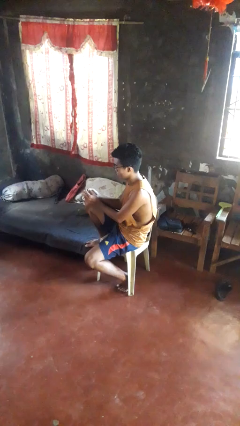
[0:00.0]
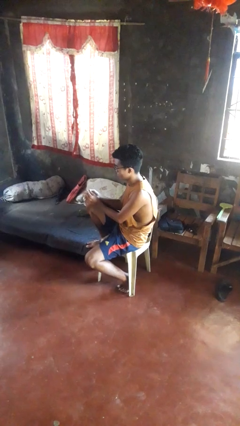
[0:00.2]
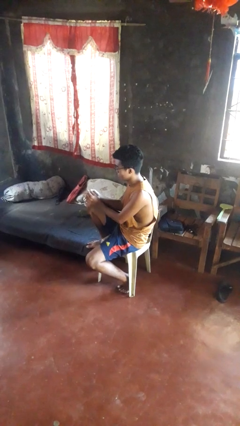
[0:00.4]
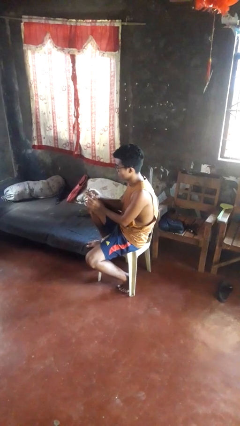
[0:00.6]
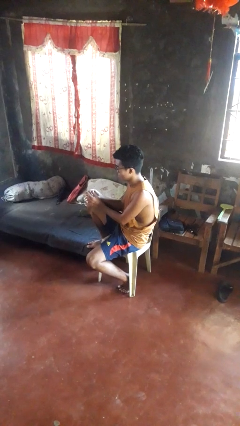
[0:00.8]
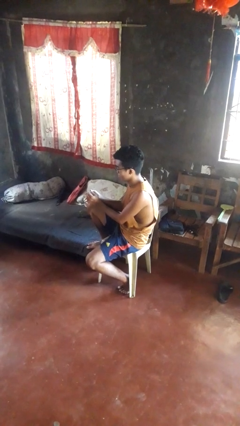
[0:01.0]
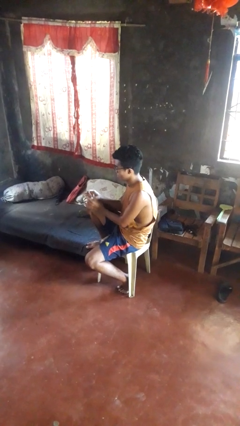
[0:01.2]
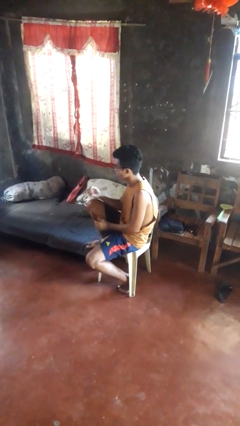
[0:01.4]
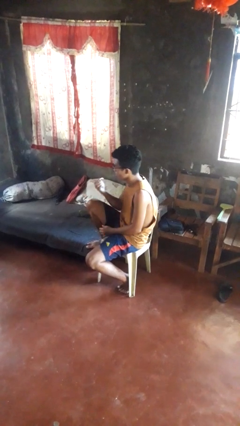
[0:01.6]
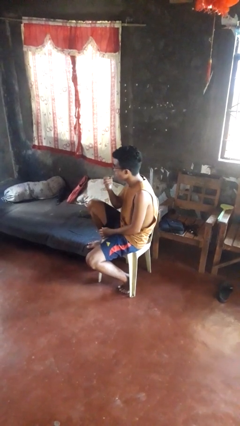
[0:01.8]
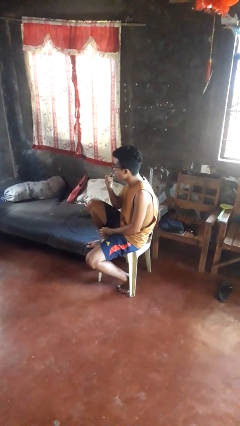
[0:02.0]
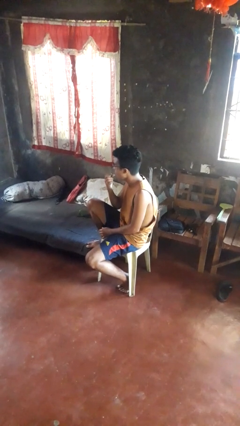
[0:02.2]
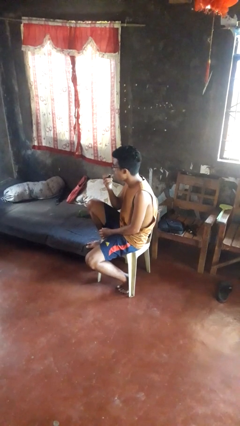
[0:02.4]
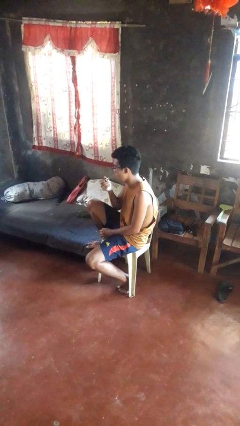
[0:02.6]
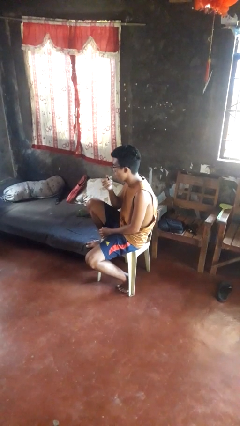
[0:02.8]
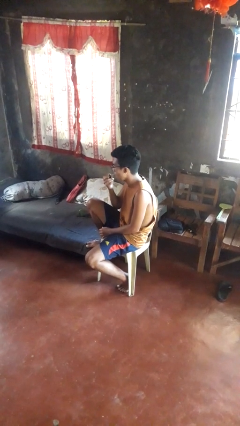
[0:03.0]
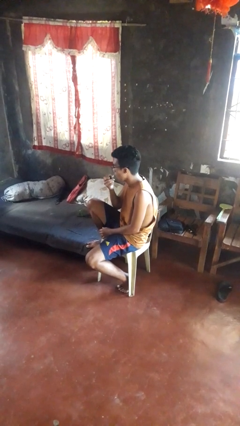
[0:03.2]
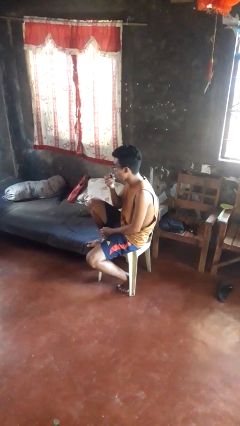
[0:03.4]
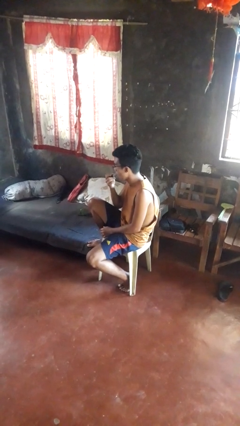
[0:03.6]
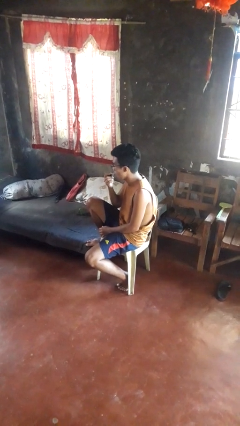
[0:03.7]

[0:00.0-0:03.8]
person applies lip makeup

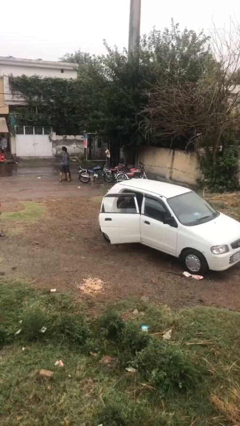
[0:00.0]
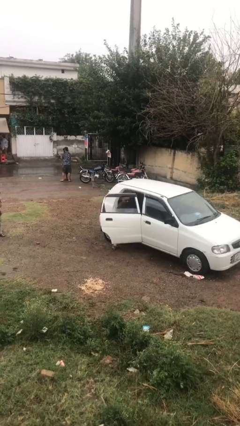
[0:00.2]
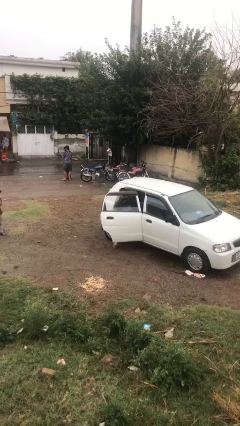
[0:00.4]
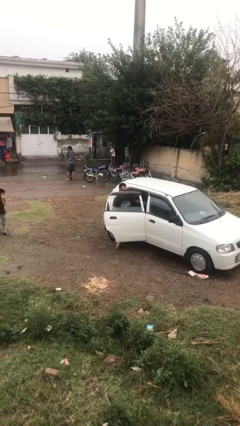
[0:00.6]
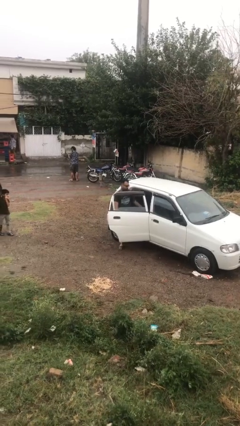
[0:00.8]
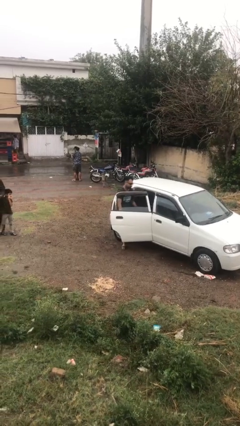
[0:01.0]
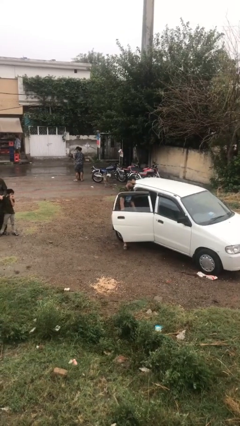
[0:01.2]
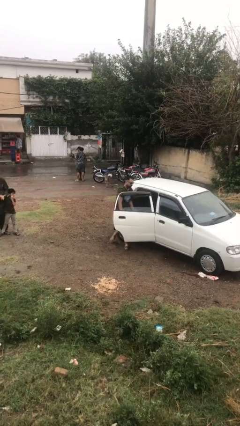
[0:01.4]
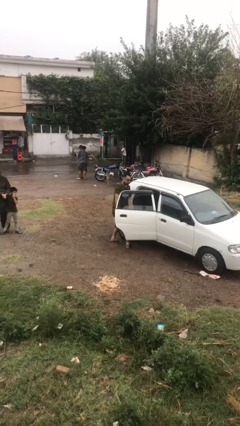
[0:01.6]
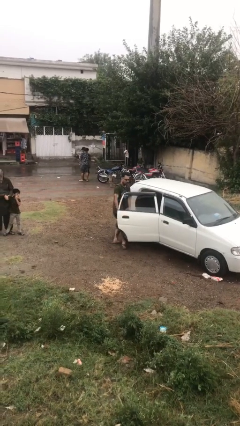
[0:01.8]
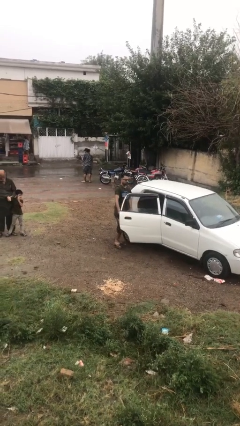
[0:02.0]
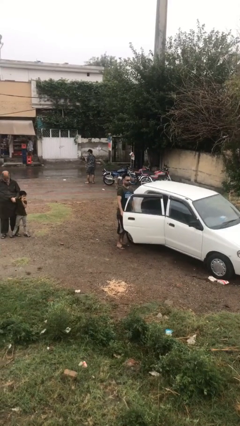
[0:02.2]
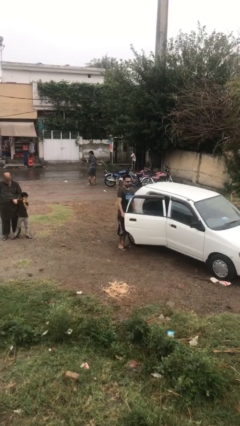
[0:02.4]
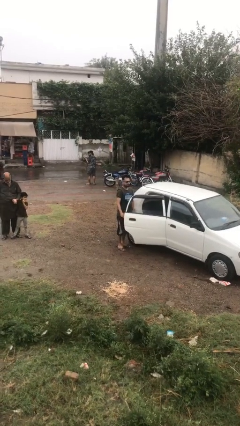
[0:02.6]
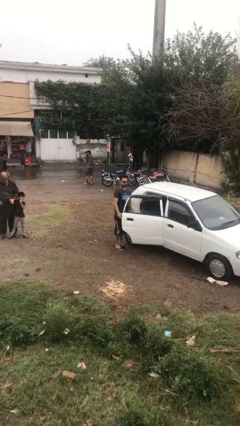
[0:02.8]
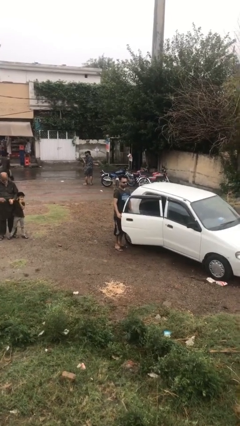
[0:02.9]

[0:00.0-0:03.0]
person exits car

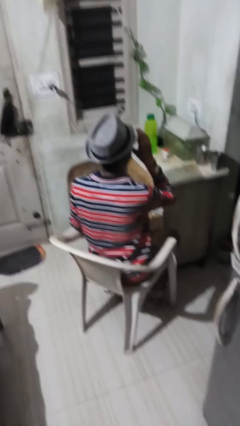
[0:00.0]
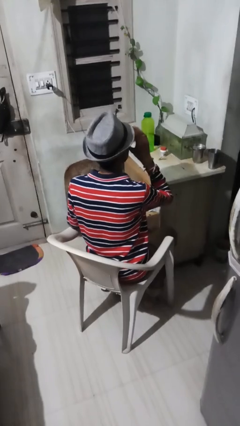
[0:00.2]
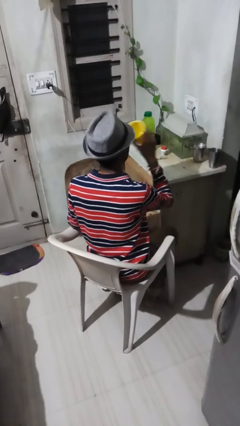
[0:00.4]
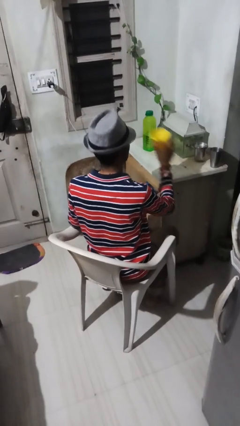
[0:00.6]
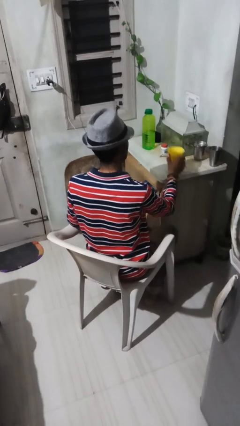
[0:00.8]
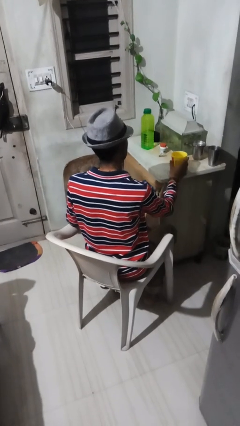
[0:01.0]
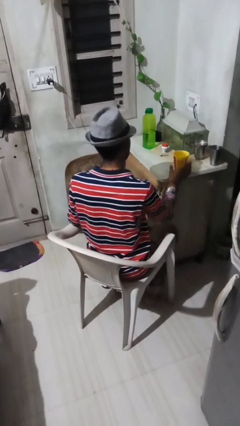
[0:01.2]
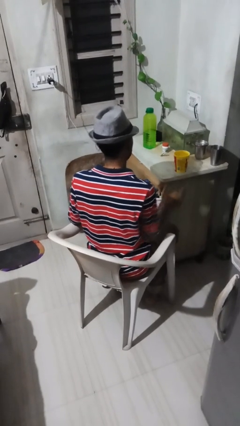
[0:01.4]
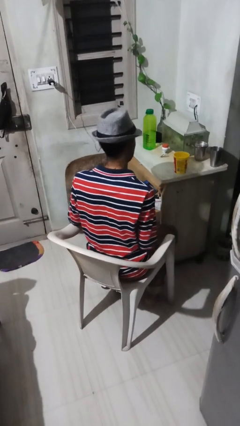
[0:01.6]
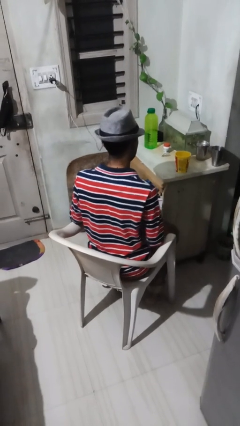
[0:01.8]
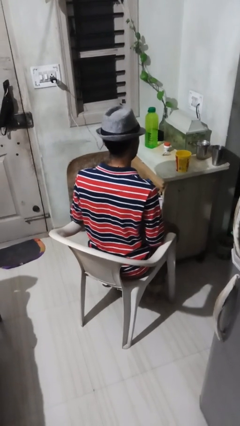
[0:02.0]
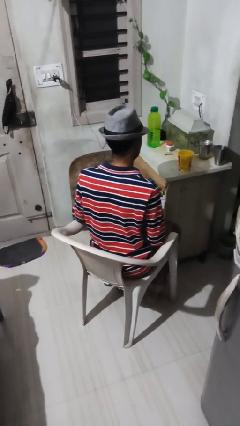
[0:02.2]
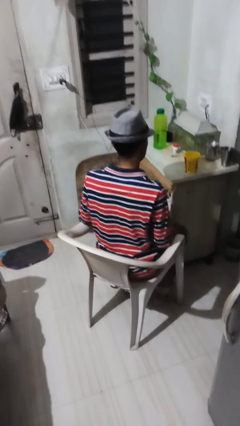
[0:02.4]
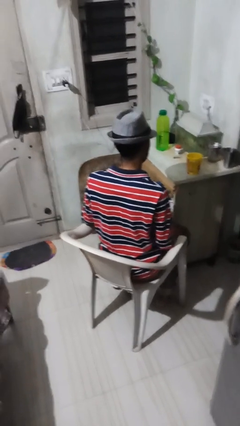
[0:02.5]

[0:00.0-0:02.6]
person puts down object on table

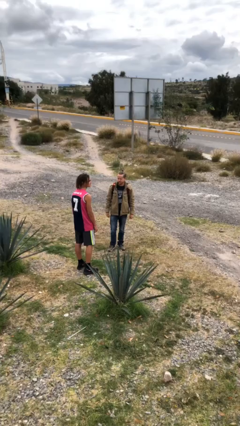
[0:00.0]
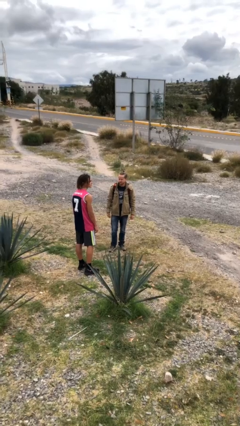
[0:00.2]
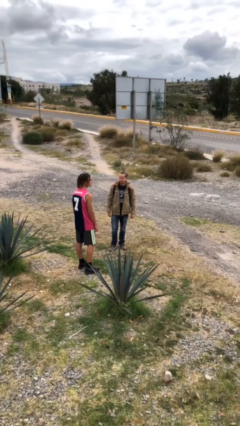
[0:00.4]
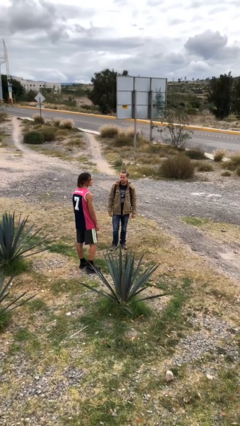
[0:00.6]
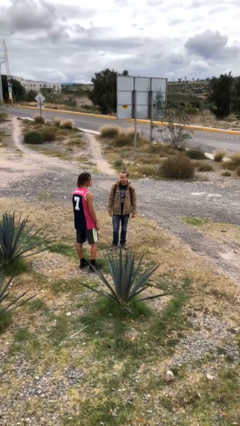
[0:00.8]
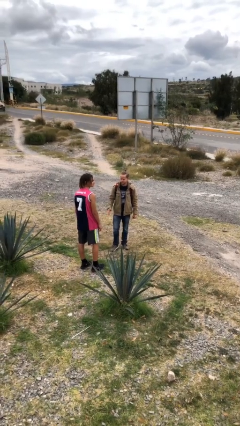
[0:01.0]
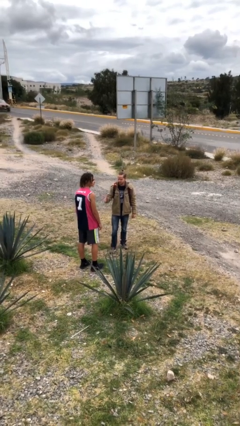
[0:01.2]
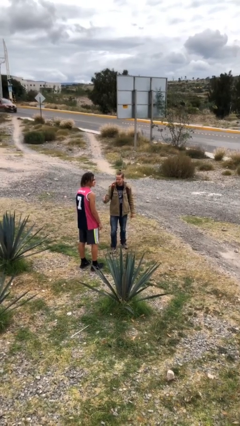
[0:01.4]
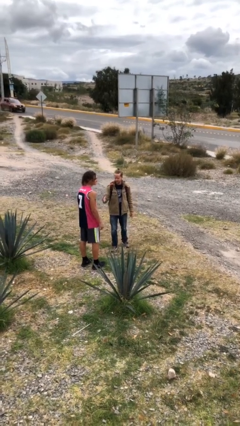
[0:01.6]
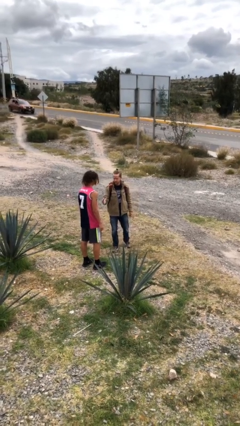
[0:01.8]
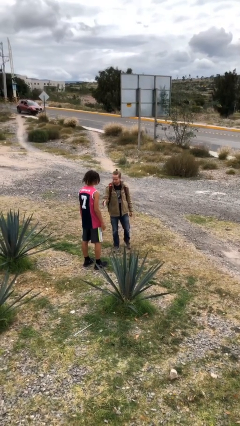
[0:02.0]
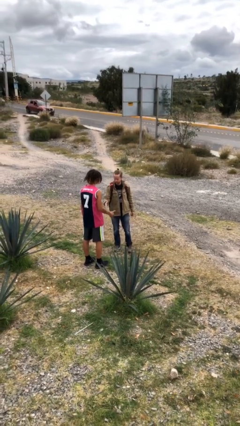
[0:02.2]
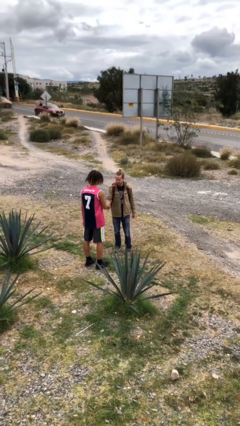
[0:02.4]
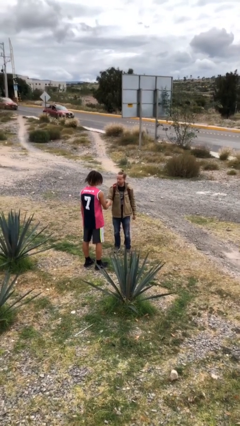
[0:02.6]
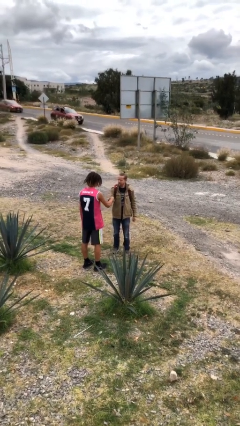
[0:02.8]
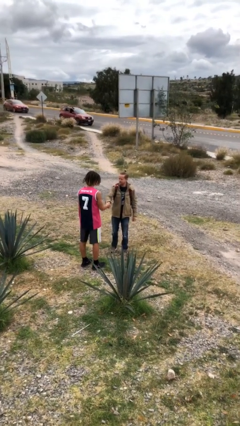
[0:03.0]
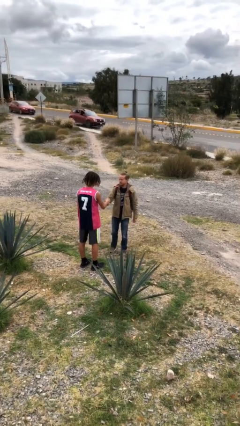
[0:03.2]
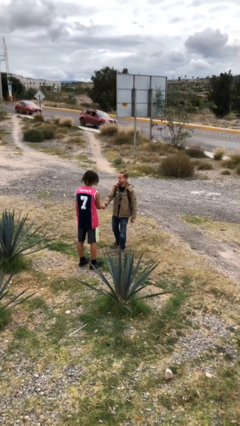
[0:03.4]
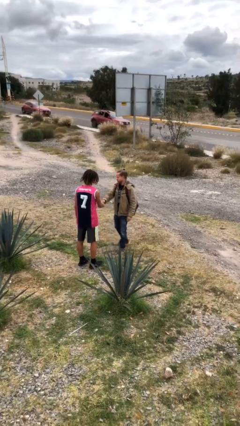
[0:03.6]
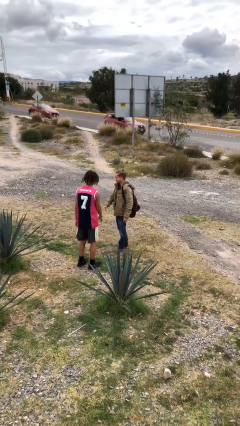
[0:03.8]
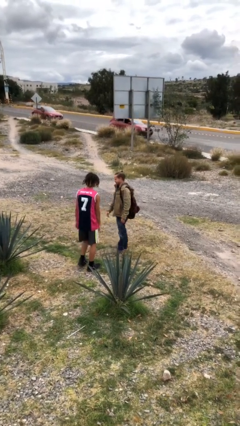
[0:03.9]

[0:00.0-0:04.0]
person shakes hand

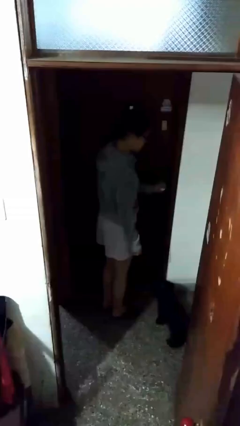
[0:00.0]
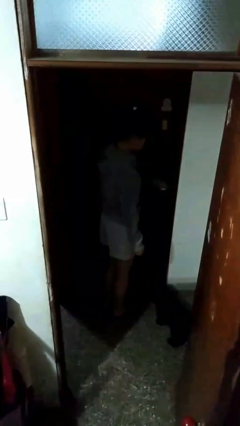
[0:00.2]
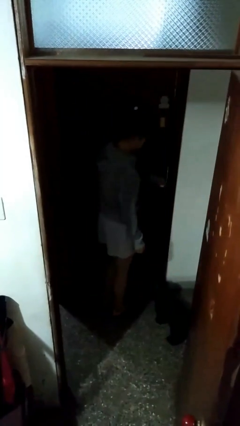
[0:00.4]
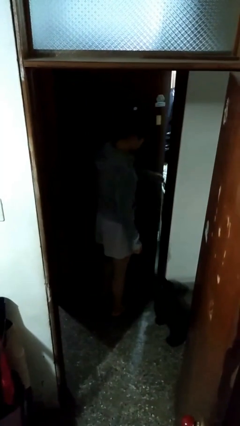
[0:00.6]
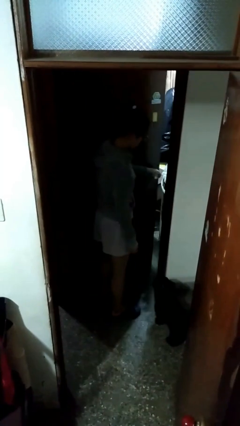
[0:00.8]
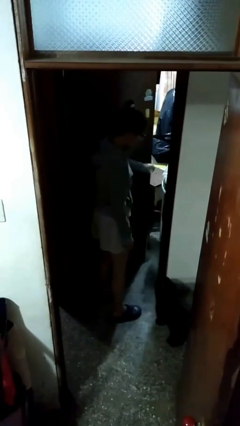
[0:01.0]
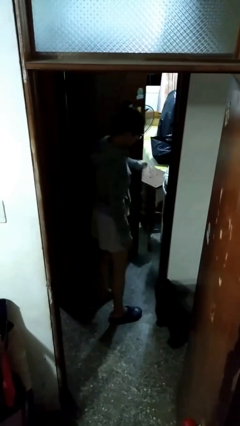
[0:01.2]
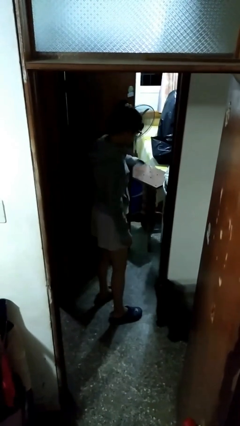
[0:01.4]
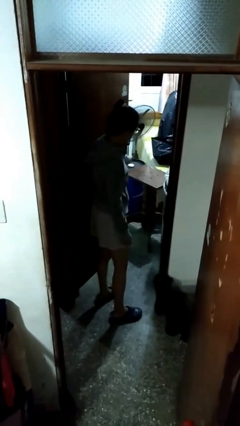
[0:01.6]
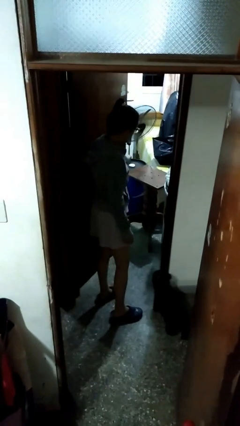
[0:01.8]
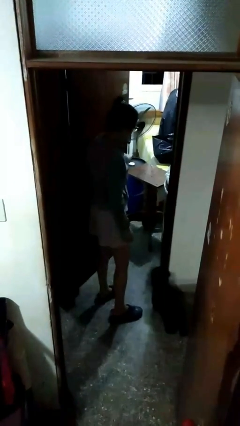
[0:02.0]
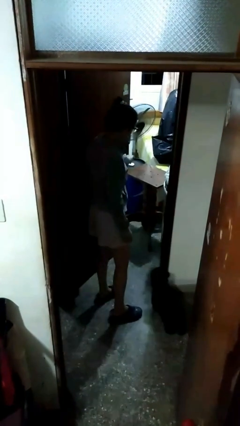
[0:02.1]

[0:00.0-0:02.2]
person opens facility door

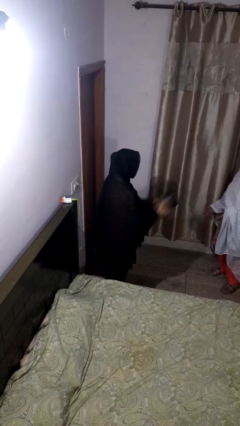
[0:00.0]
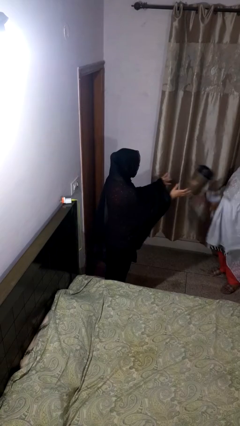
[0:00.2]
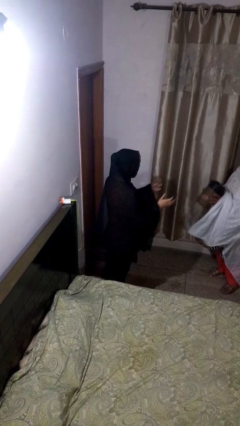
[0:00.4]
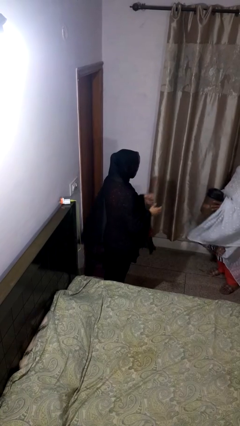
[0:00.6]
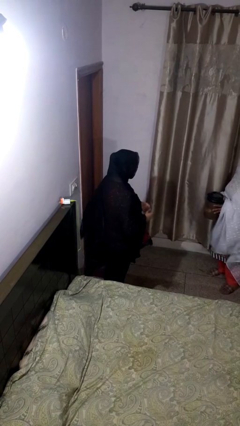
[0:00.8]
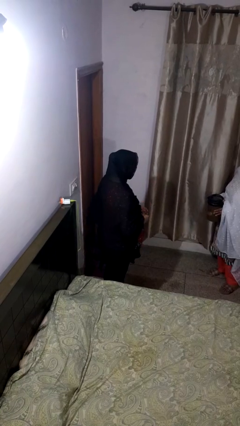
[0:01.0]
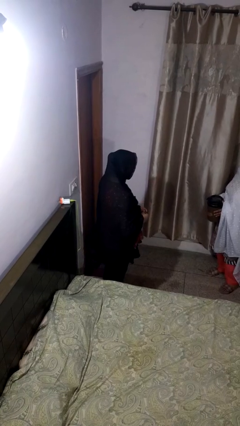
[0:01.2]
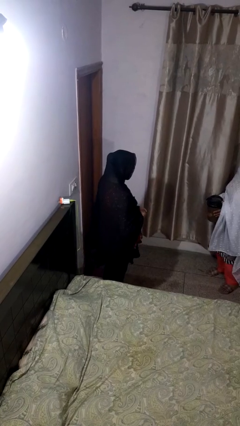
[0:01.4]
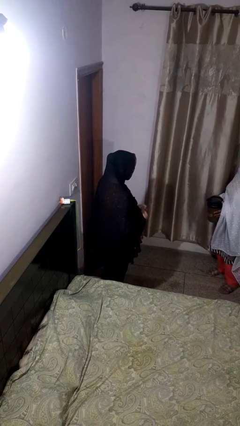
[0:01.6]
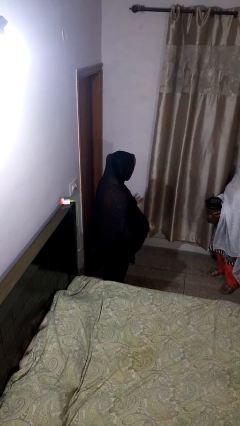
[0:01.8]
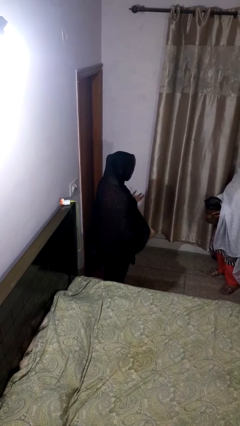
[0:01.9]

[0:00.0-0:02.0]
person throws object to person
